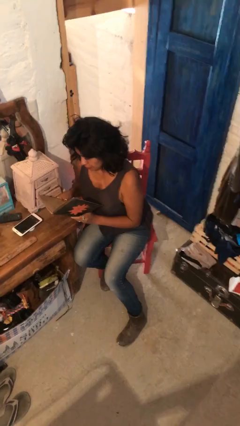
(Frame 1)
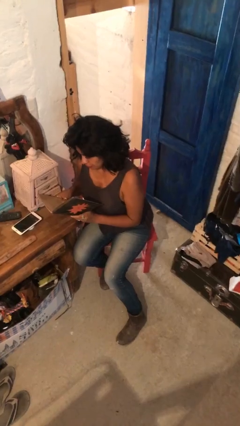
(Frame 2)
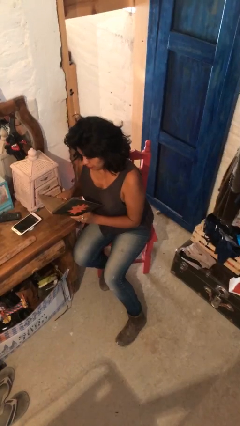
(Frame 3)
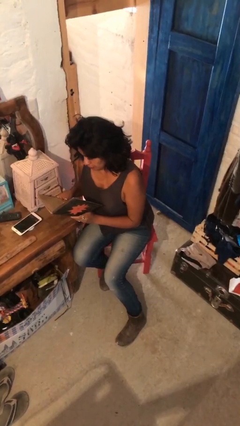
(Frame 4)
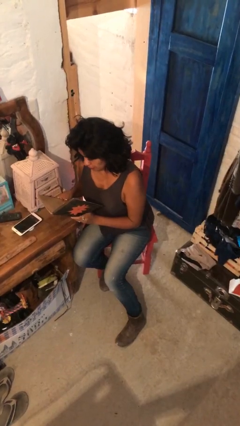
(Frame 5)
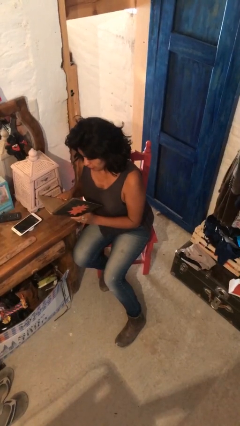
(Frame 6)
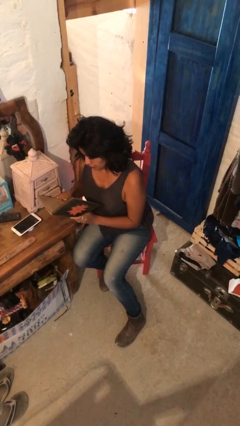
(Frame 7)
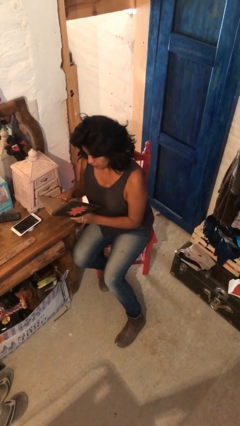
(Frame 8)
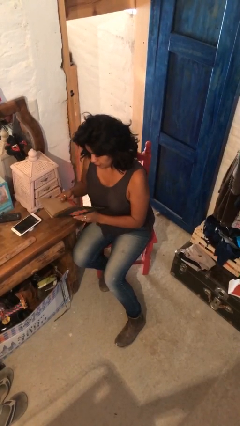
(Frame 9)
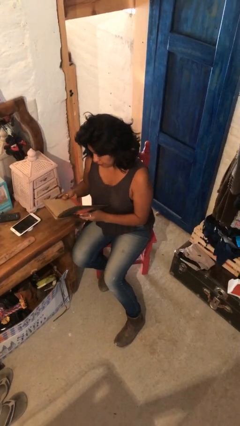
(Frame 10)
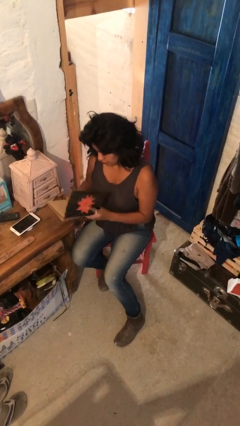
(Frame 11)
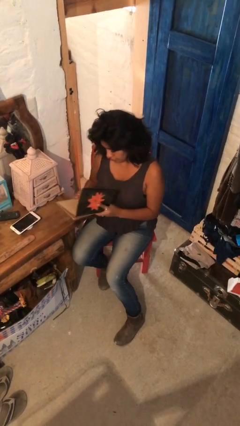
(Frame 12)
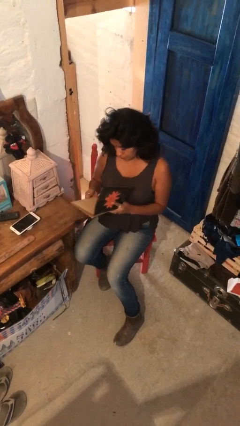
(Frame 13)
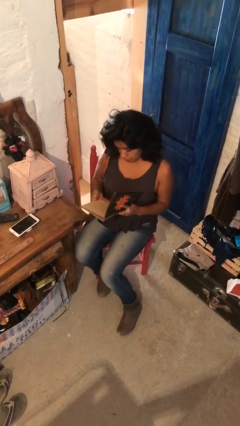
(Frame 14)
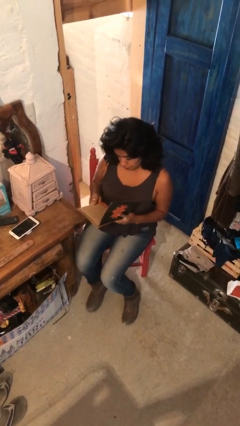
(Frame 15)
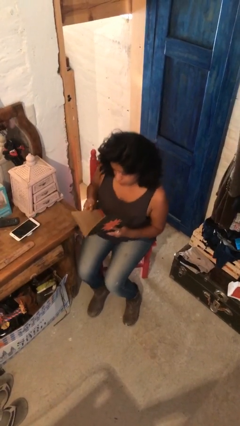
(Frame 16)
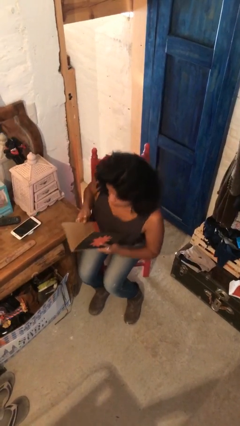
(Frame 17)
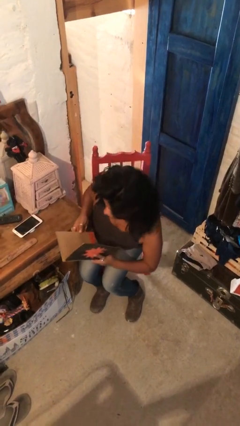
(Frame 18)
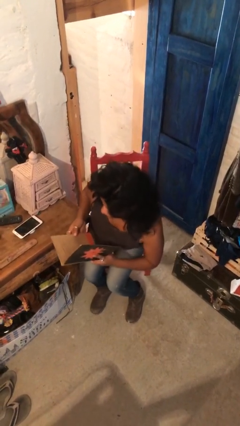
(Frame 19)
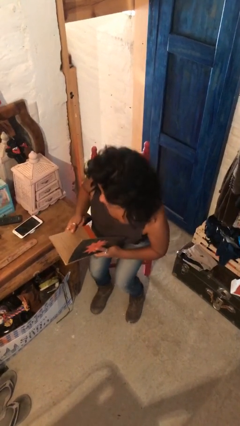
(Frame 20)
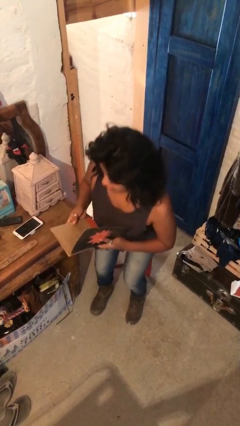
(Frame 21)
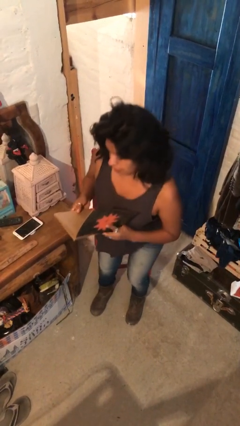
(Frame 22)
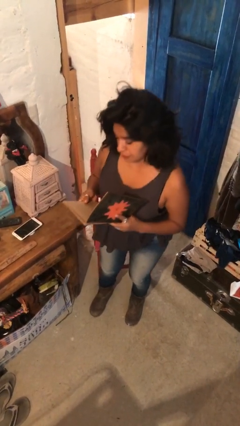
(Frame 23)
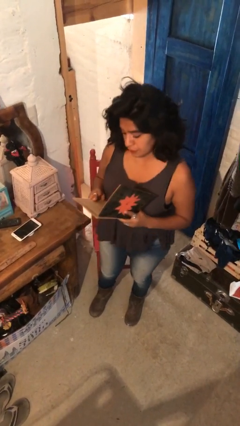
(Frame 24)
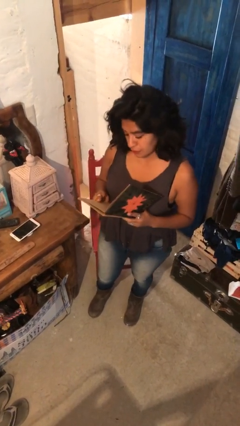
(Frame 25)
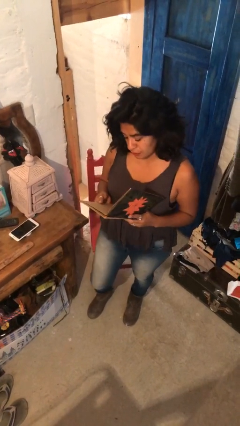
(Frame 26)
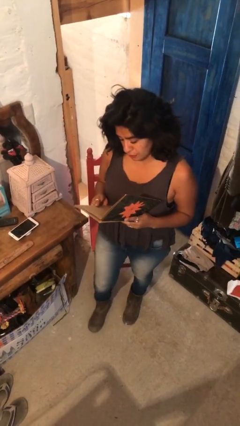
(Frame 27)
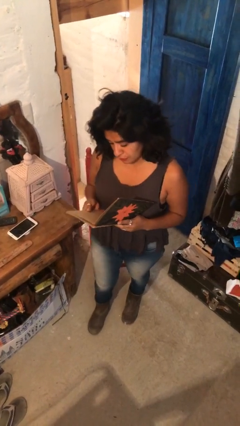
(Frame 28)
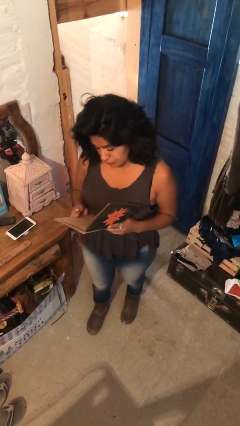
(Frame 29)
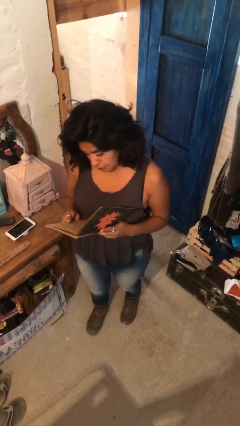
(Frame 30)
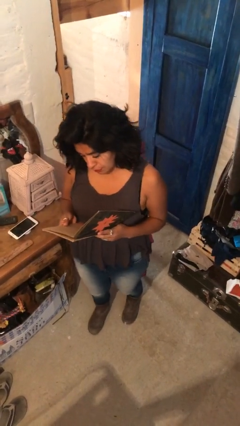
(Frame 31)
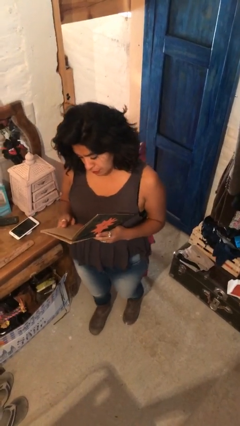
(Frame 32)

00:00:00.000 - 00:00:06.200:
person stands up

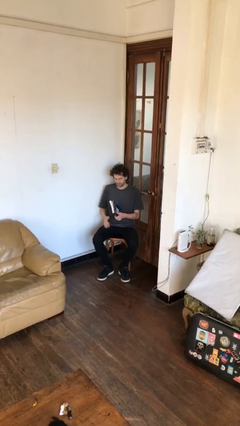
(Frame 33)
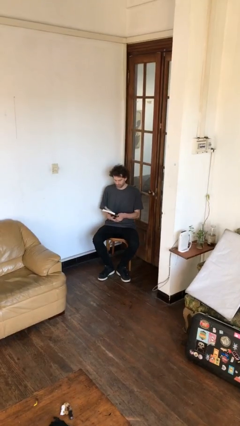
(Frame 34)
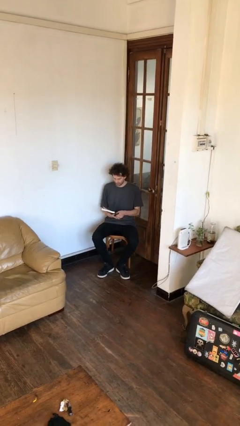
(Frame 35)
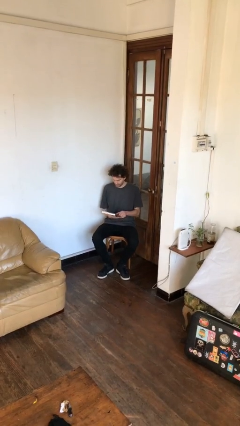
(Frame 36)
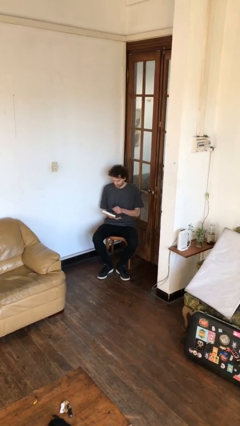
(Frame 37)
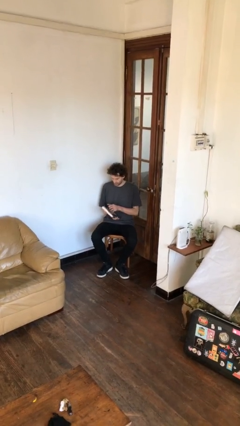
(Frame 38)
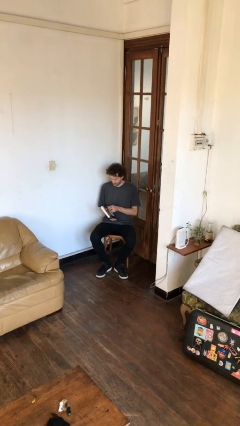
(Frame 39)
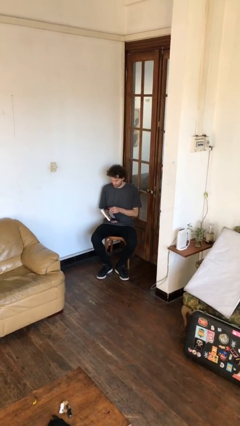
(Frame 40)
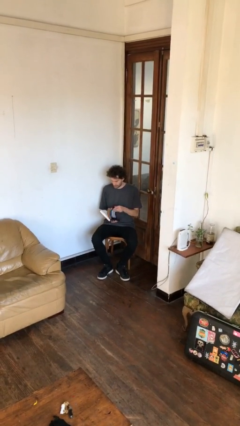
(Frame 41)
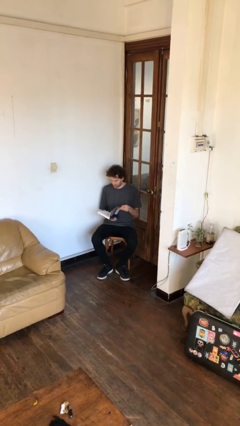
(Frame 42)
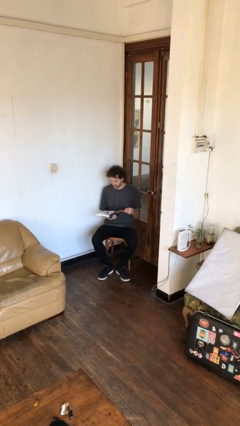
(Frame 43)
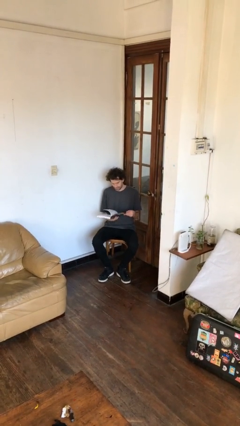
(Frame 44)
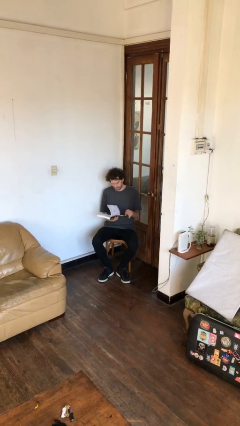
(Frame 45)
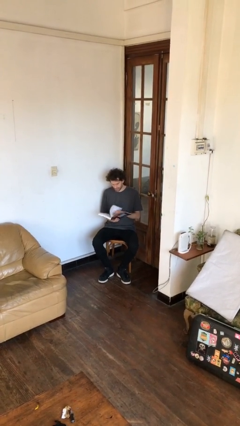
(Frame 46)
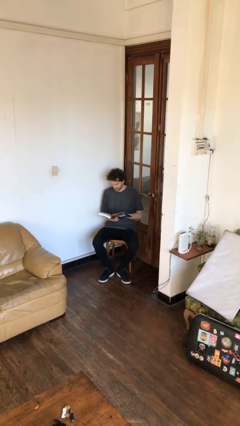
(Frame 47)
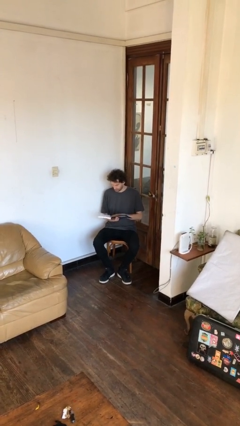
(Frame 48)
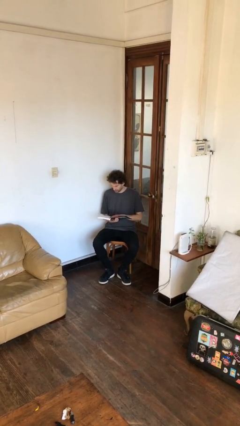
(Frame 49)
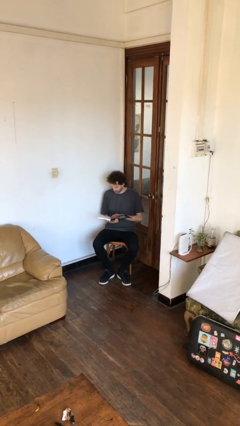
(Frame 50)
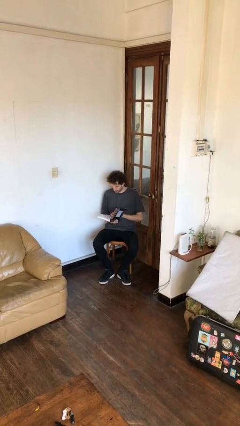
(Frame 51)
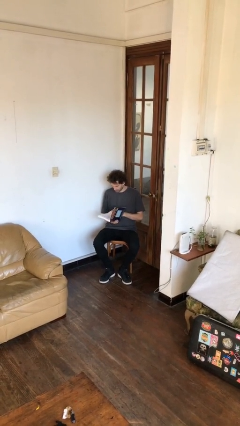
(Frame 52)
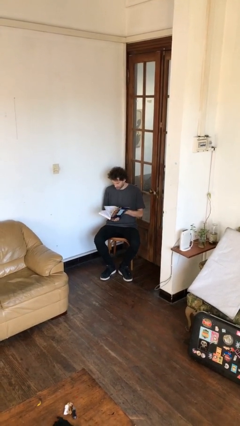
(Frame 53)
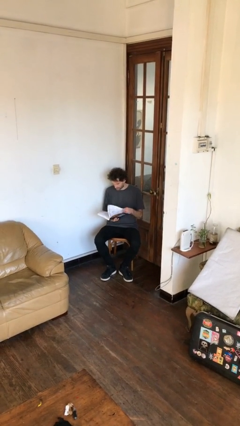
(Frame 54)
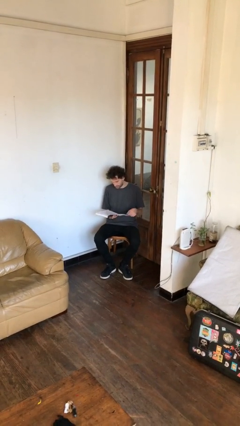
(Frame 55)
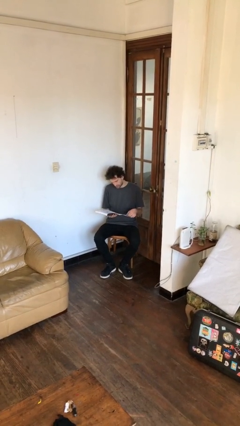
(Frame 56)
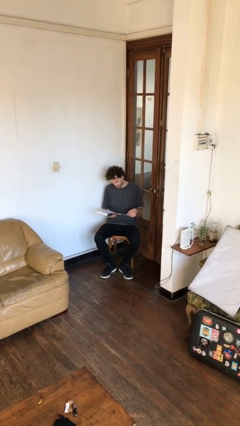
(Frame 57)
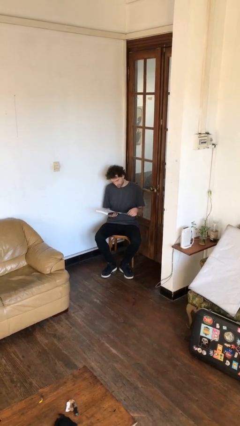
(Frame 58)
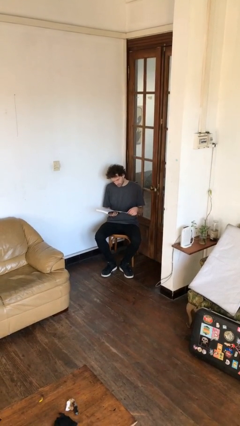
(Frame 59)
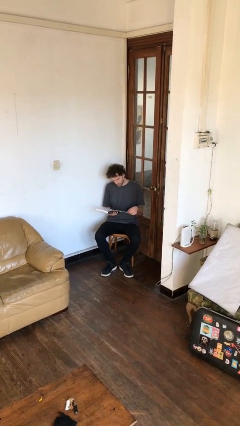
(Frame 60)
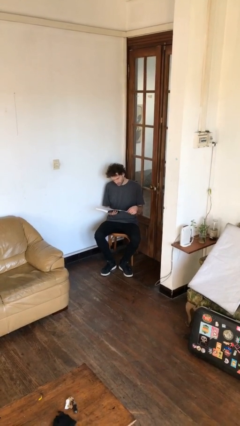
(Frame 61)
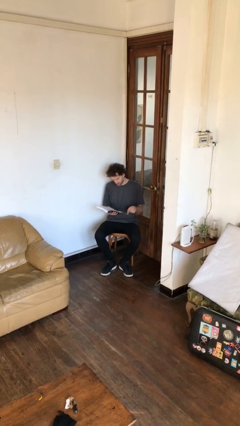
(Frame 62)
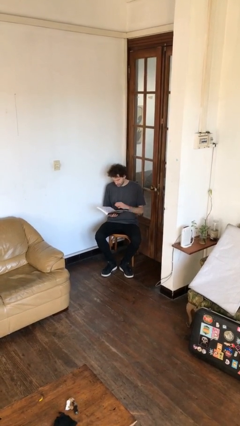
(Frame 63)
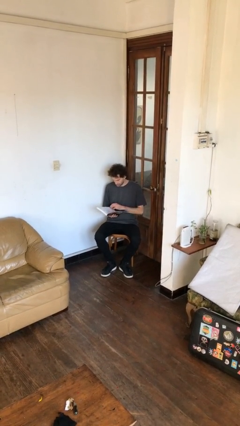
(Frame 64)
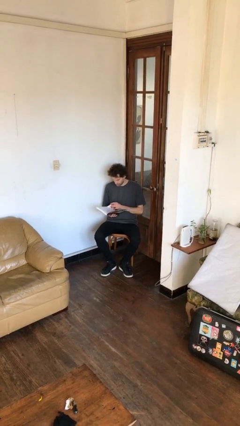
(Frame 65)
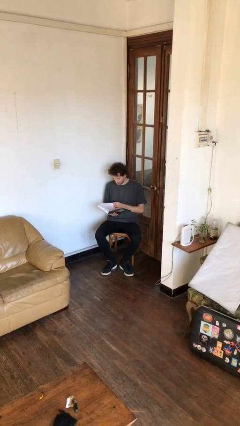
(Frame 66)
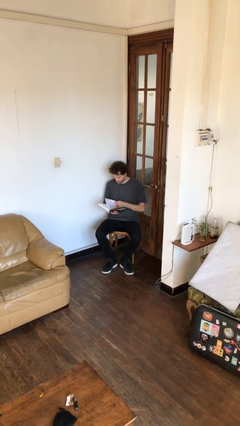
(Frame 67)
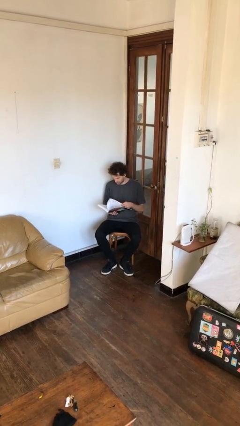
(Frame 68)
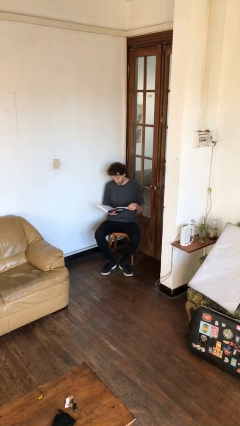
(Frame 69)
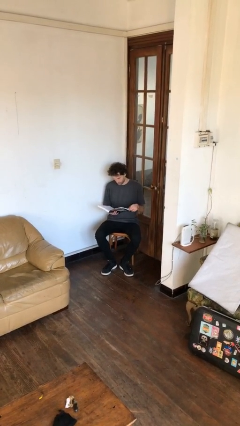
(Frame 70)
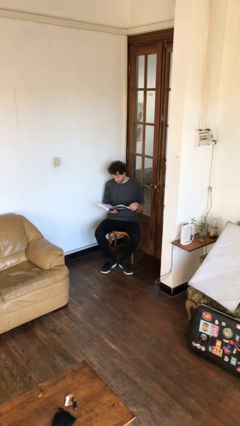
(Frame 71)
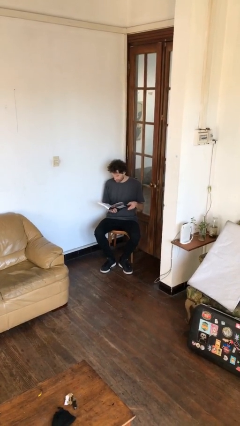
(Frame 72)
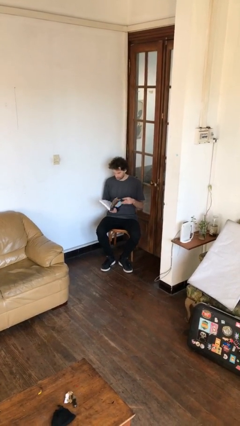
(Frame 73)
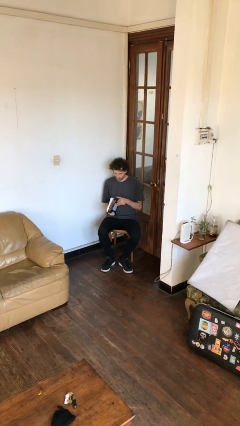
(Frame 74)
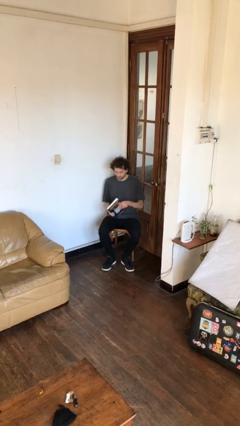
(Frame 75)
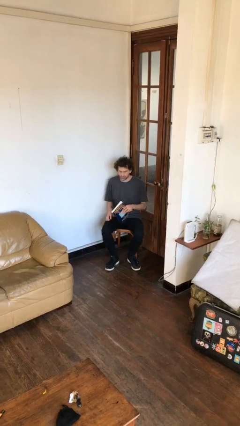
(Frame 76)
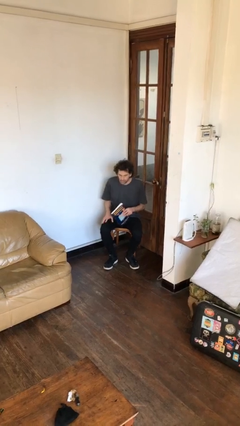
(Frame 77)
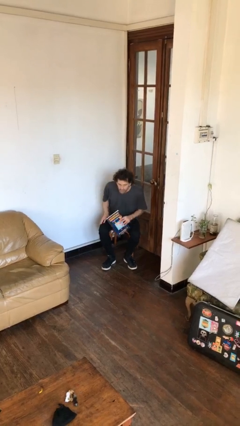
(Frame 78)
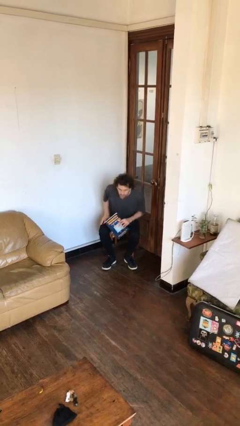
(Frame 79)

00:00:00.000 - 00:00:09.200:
person reads document

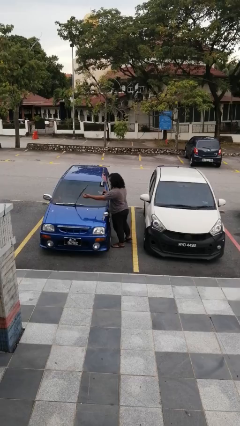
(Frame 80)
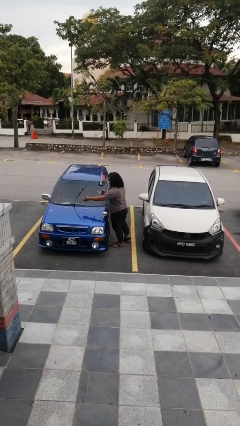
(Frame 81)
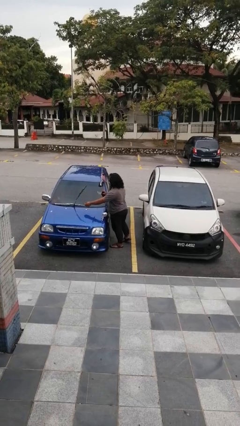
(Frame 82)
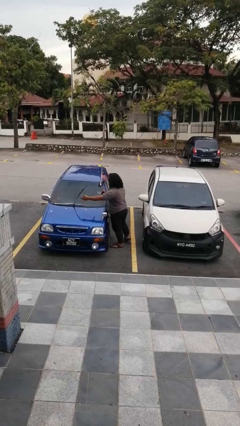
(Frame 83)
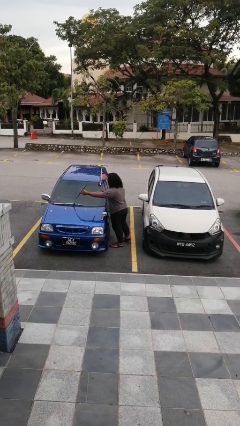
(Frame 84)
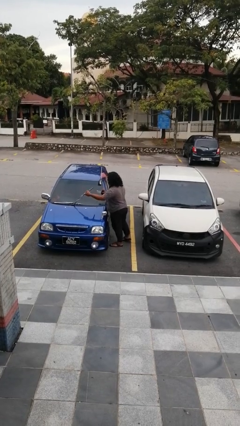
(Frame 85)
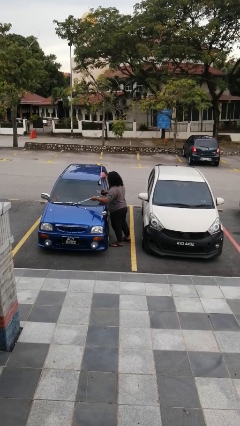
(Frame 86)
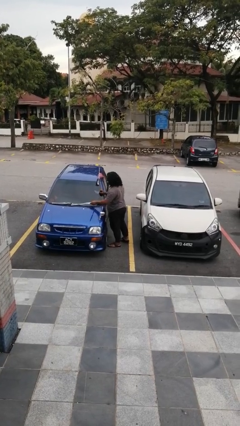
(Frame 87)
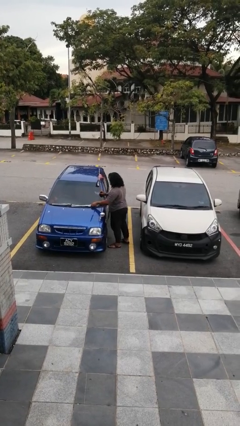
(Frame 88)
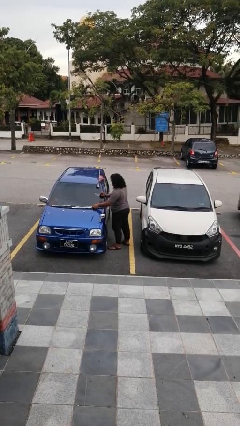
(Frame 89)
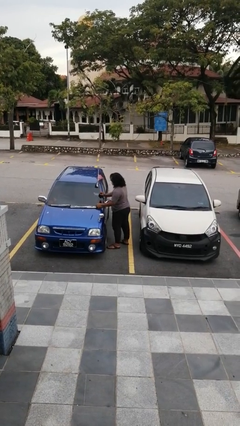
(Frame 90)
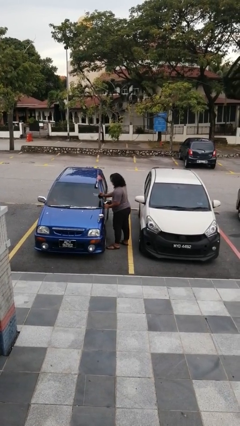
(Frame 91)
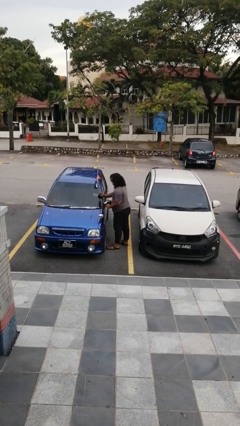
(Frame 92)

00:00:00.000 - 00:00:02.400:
person flips down car wipers
